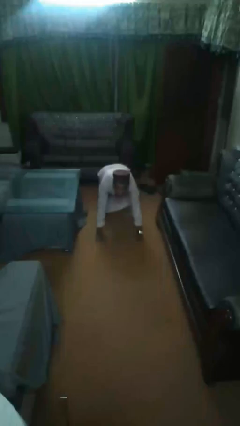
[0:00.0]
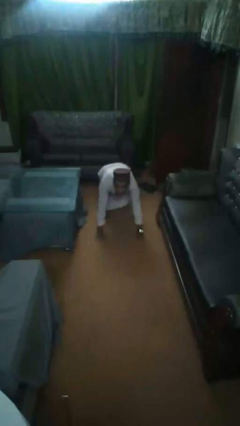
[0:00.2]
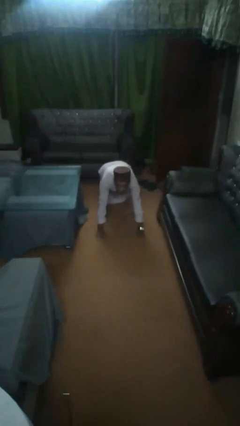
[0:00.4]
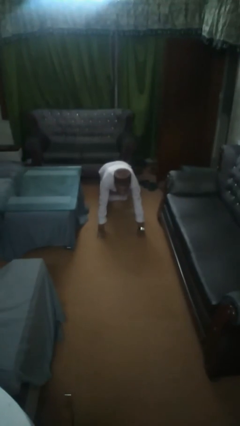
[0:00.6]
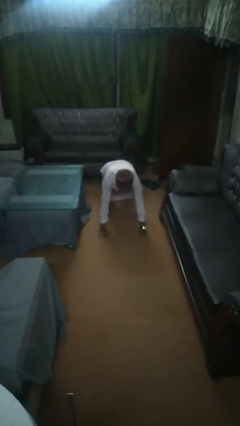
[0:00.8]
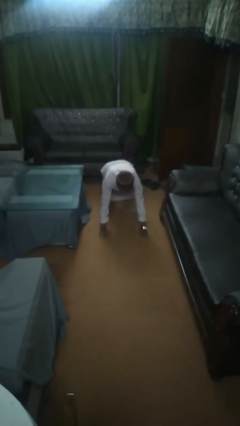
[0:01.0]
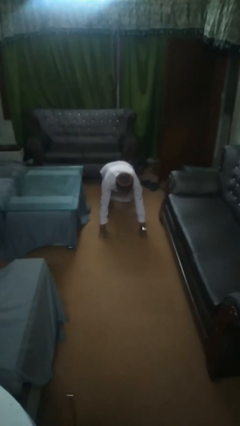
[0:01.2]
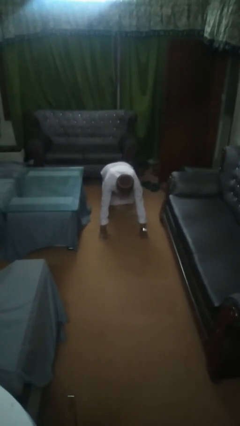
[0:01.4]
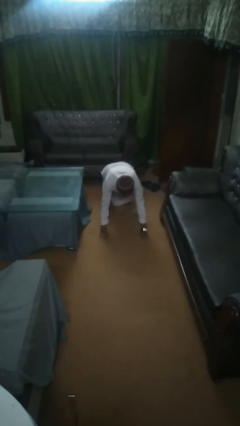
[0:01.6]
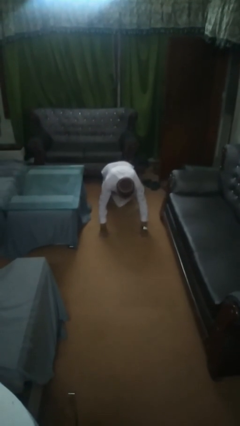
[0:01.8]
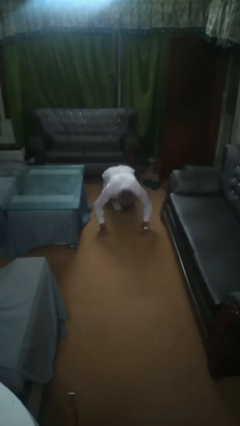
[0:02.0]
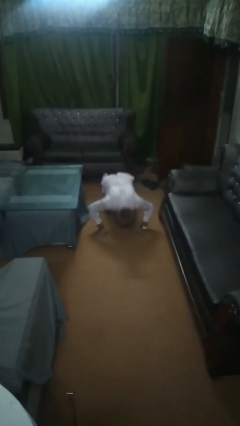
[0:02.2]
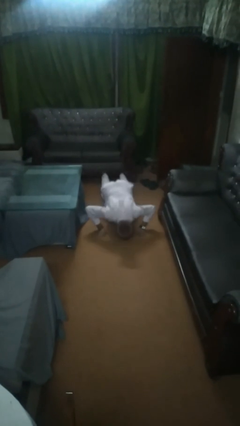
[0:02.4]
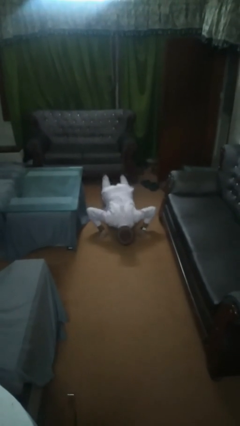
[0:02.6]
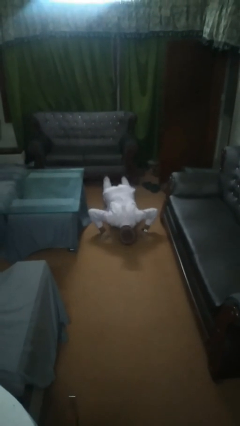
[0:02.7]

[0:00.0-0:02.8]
person exercises with pushup

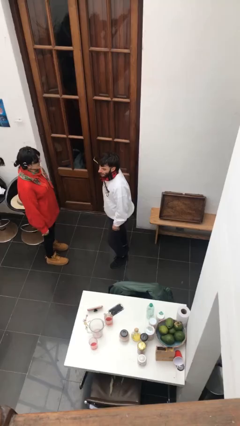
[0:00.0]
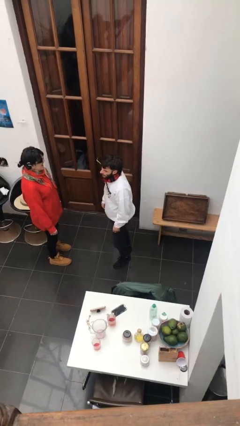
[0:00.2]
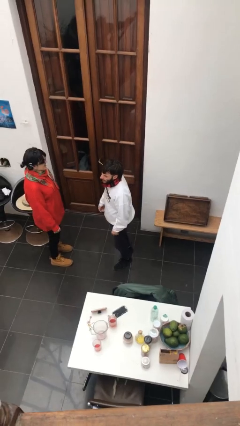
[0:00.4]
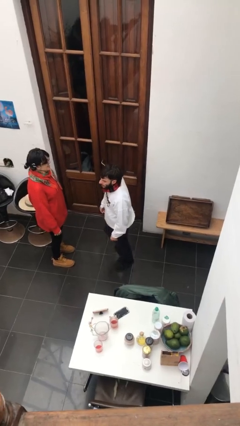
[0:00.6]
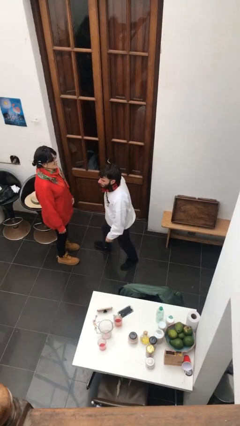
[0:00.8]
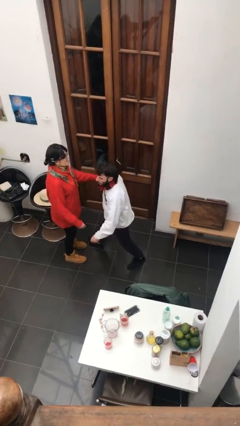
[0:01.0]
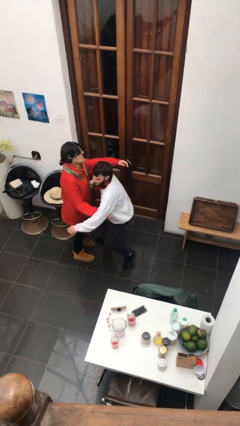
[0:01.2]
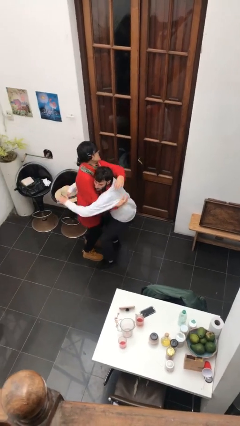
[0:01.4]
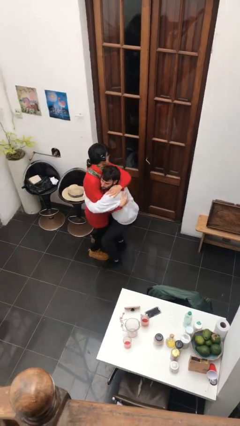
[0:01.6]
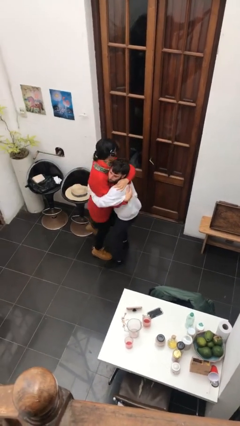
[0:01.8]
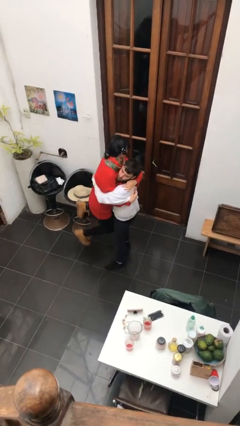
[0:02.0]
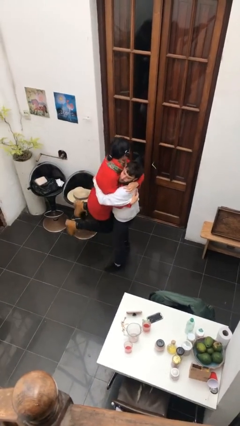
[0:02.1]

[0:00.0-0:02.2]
person picks up person

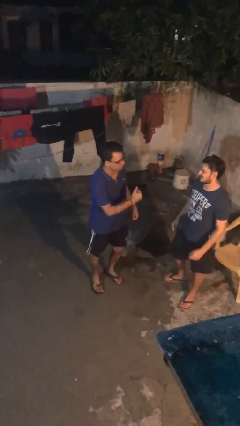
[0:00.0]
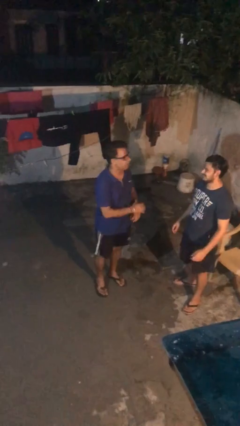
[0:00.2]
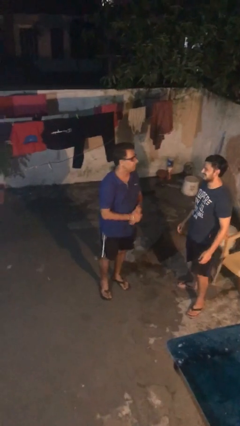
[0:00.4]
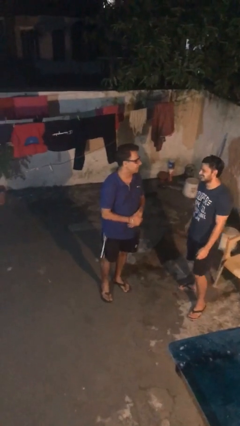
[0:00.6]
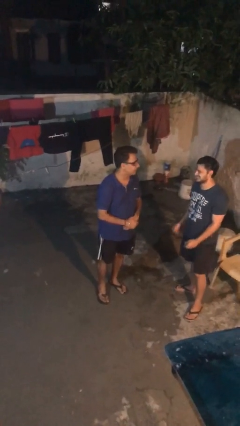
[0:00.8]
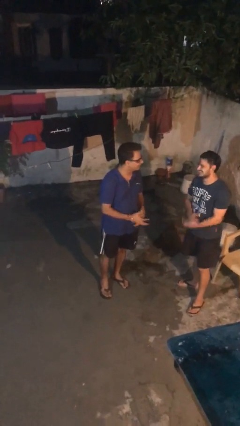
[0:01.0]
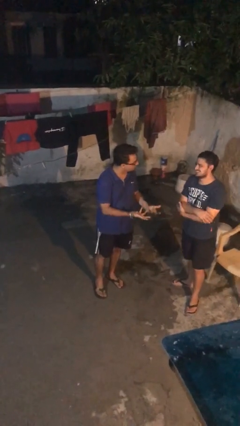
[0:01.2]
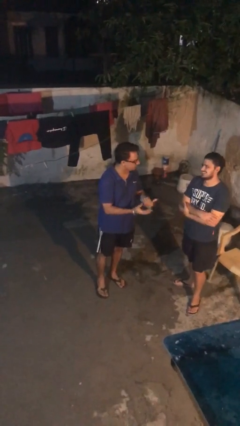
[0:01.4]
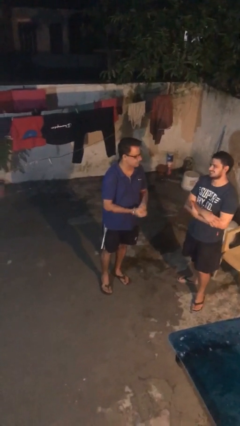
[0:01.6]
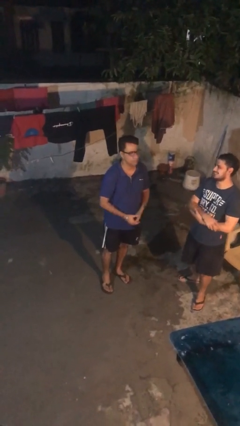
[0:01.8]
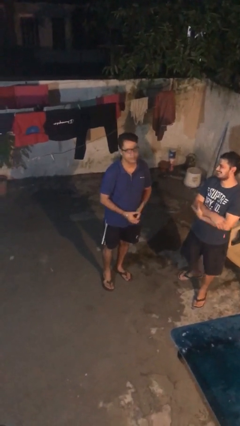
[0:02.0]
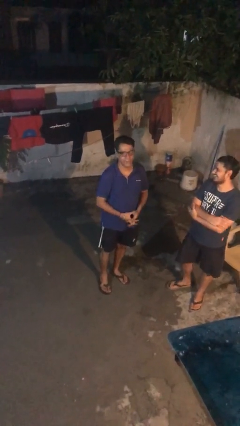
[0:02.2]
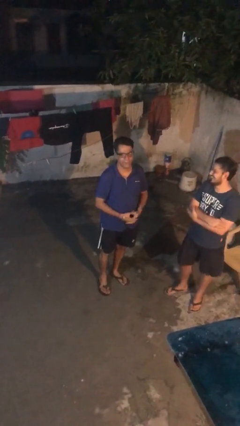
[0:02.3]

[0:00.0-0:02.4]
person talks to person

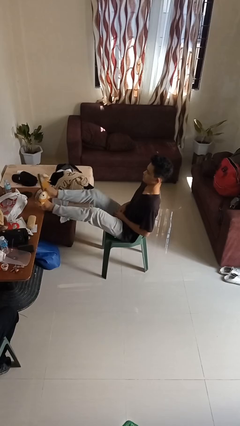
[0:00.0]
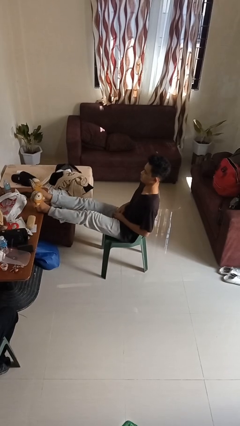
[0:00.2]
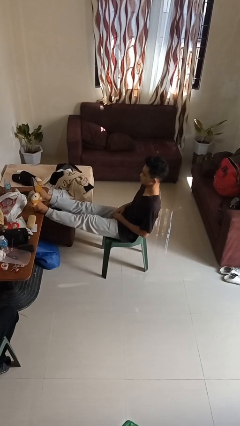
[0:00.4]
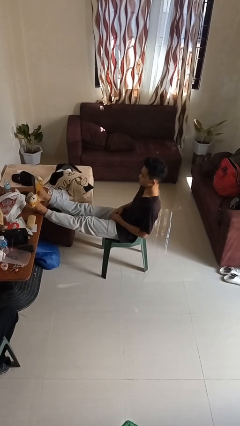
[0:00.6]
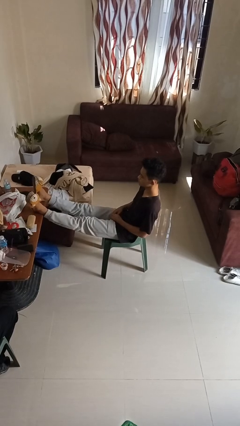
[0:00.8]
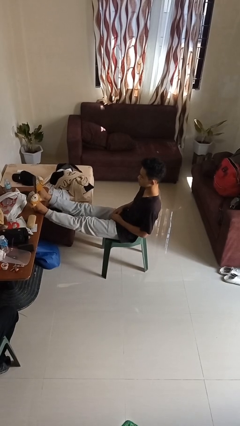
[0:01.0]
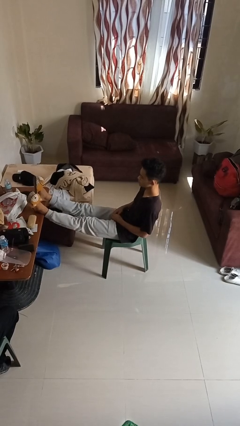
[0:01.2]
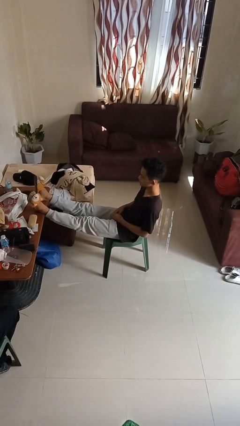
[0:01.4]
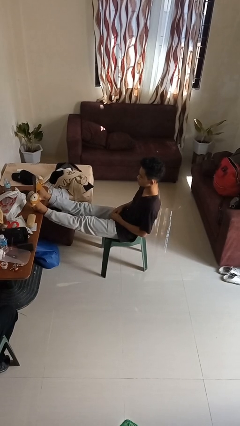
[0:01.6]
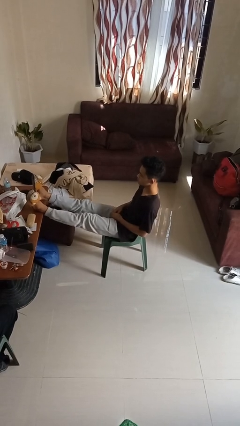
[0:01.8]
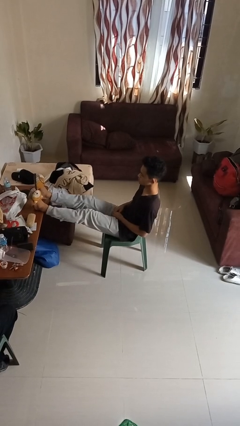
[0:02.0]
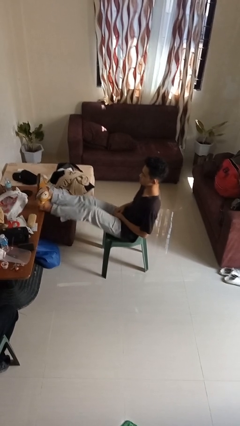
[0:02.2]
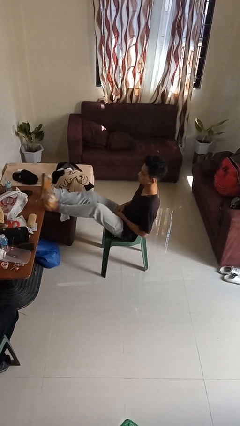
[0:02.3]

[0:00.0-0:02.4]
person puts feet up

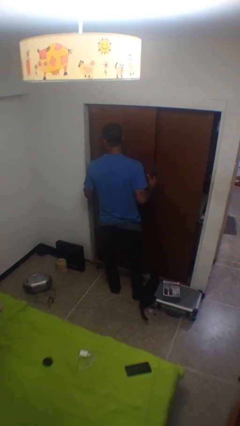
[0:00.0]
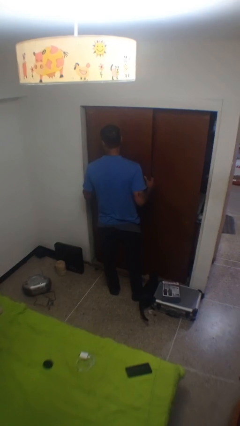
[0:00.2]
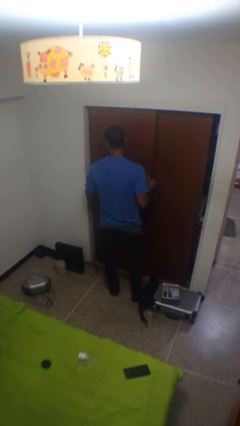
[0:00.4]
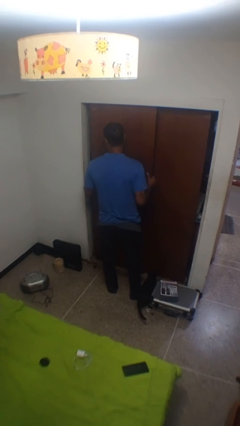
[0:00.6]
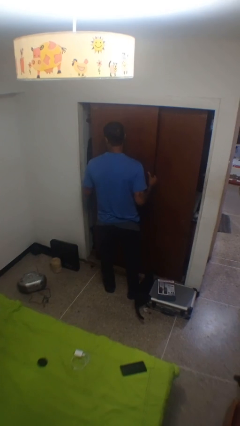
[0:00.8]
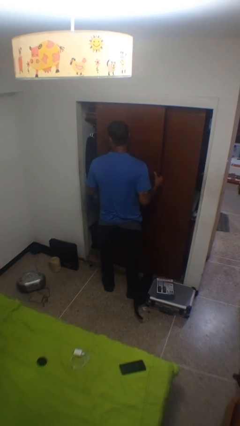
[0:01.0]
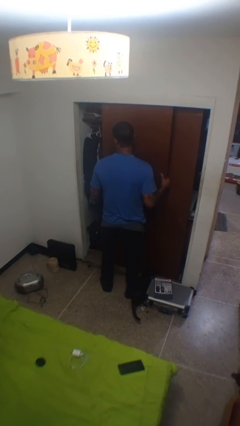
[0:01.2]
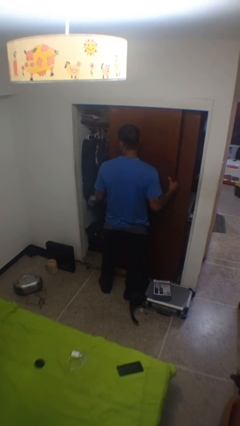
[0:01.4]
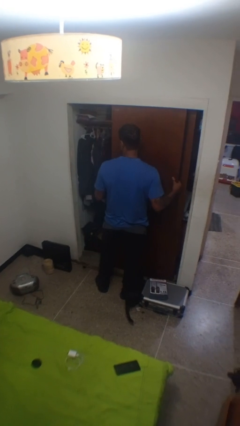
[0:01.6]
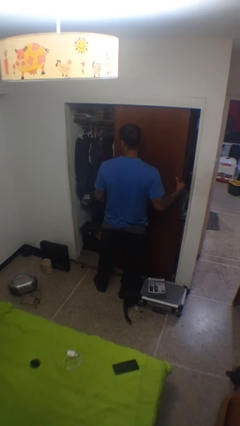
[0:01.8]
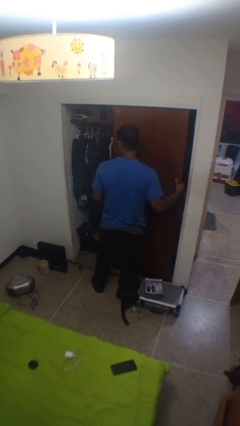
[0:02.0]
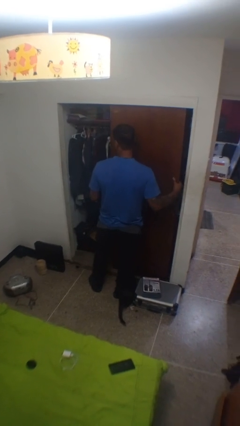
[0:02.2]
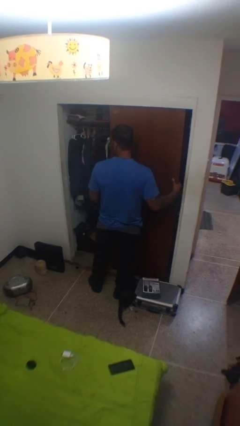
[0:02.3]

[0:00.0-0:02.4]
person opens closet door

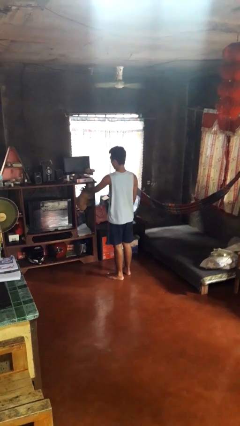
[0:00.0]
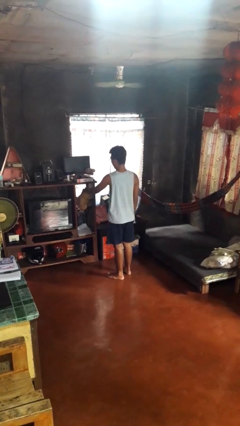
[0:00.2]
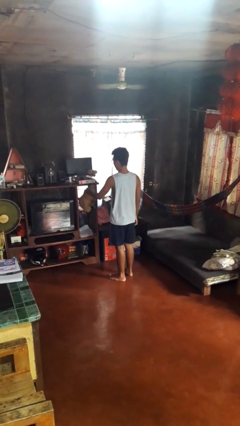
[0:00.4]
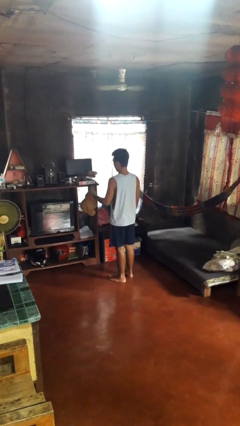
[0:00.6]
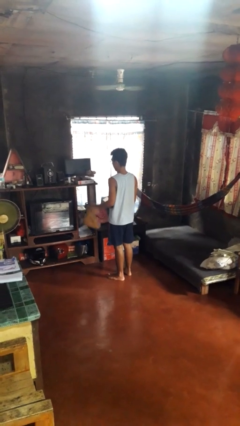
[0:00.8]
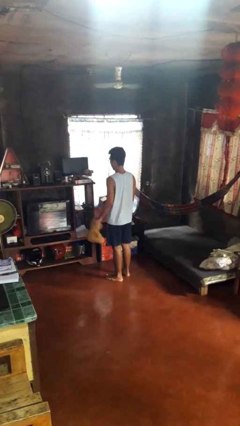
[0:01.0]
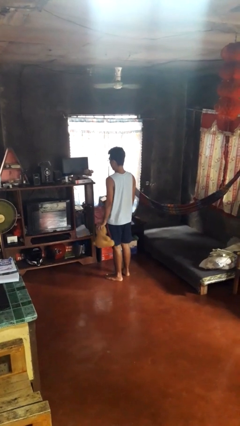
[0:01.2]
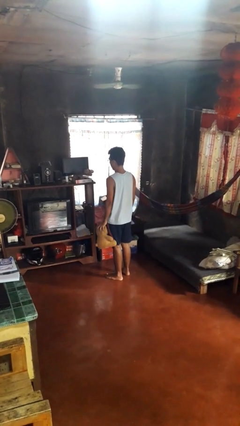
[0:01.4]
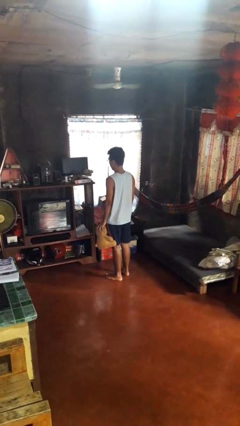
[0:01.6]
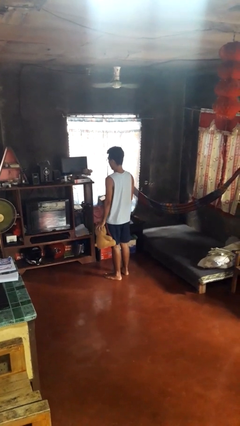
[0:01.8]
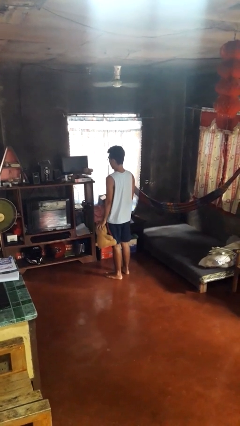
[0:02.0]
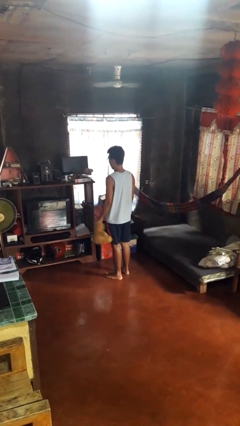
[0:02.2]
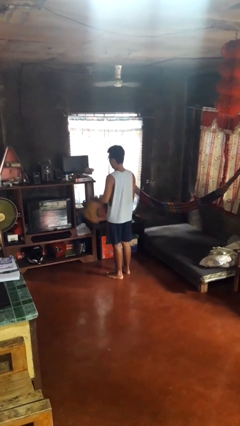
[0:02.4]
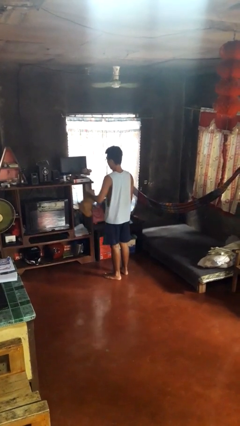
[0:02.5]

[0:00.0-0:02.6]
person picks up object from cabinet

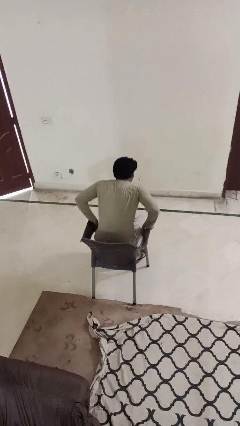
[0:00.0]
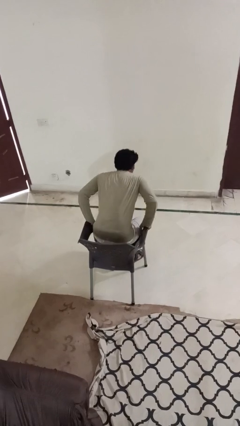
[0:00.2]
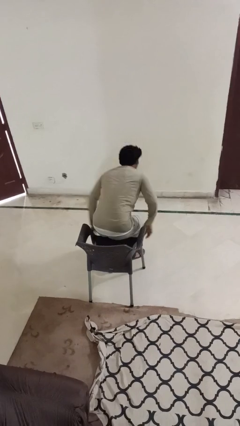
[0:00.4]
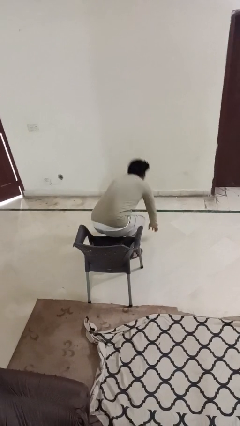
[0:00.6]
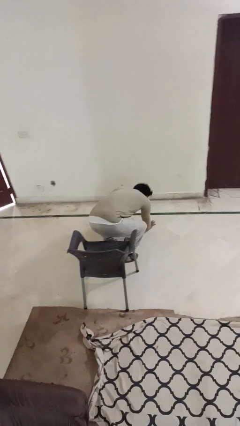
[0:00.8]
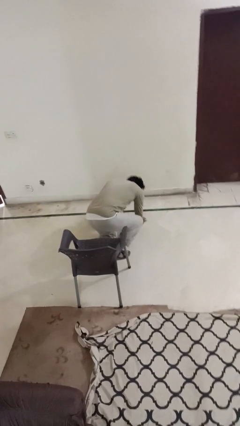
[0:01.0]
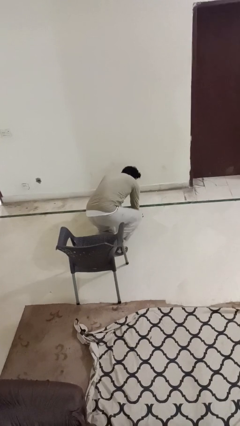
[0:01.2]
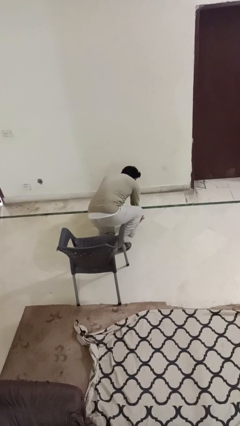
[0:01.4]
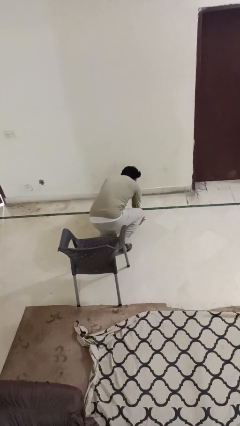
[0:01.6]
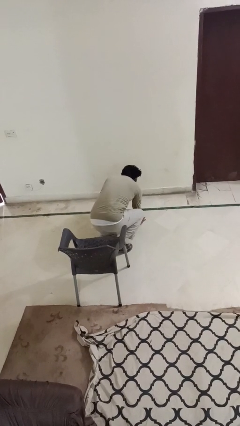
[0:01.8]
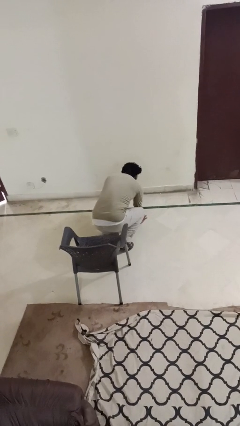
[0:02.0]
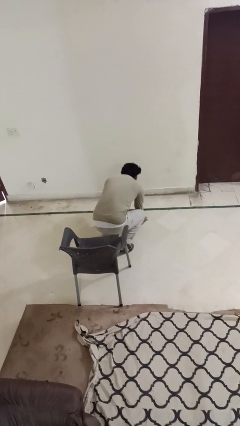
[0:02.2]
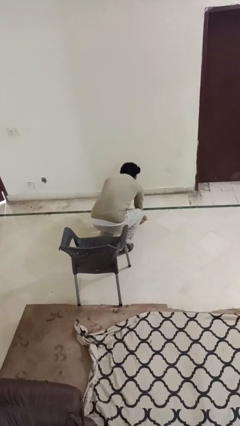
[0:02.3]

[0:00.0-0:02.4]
person falls from chair
